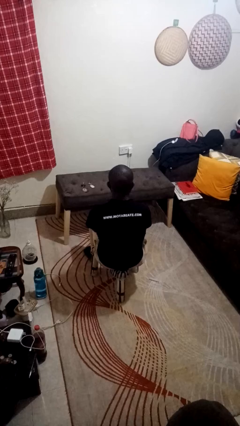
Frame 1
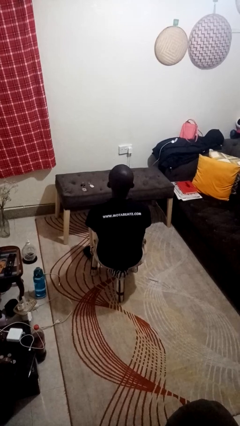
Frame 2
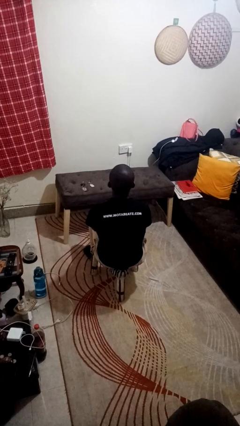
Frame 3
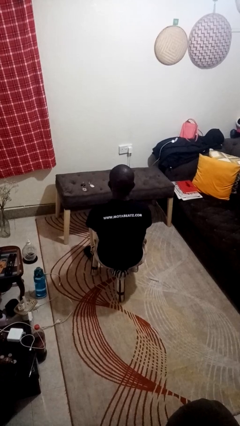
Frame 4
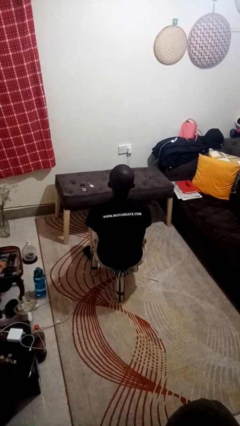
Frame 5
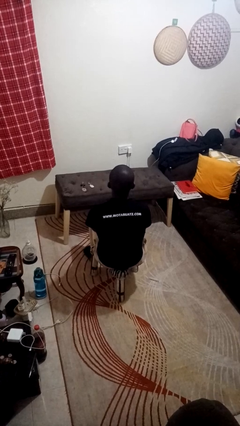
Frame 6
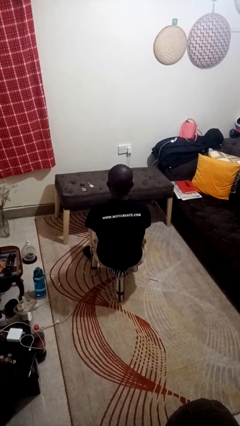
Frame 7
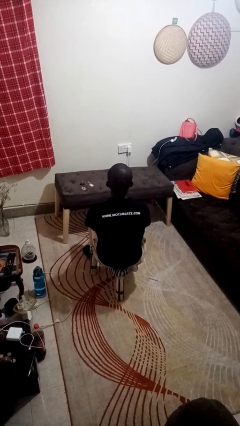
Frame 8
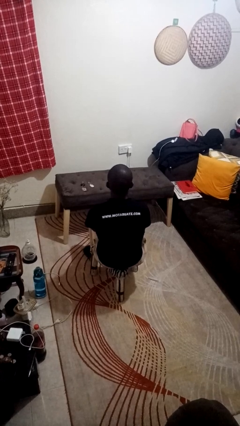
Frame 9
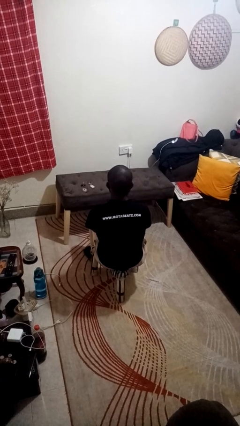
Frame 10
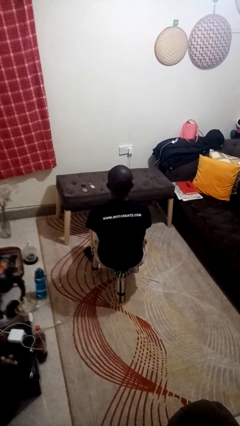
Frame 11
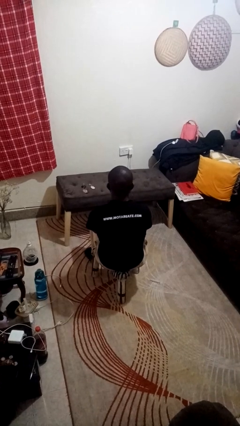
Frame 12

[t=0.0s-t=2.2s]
person nods head

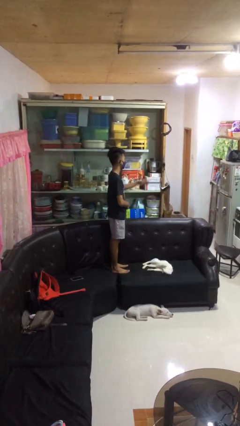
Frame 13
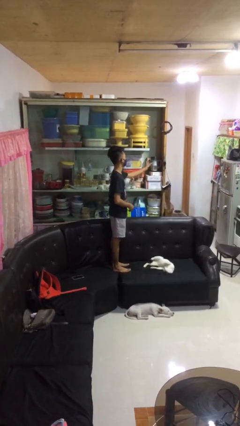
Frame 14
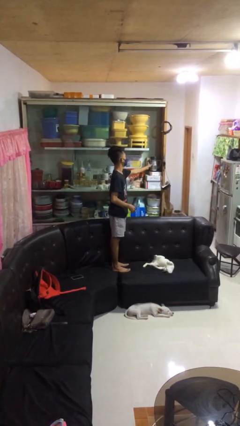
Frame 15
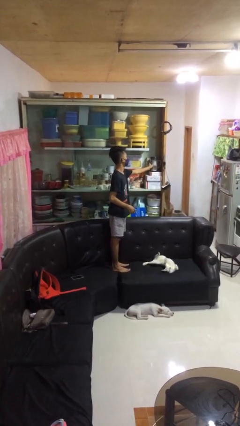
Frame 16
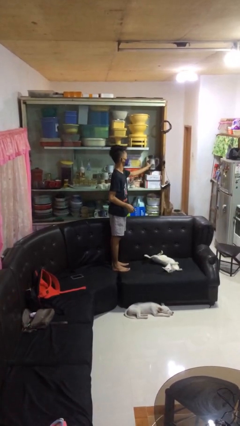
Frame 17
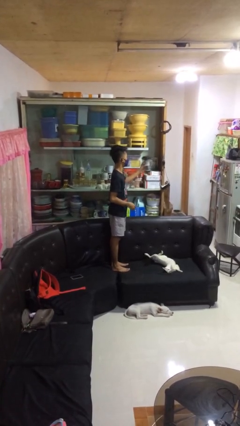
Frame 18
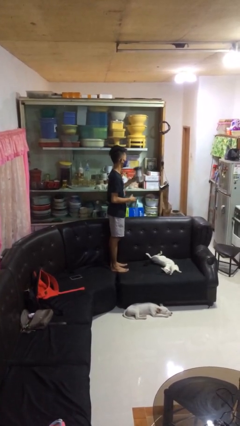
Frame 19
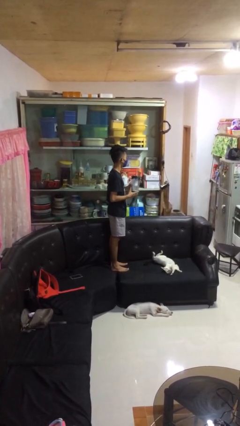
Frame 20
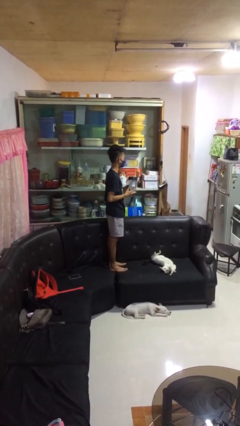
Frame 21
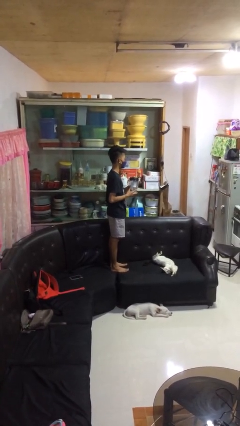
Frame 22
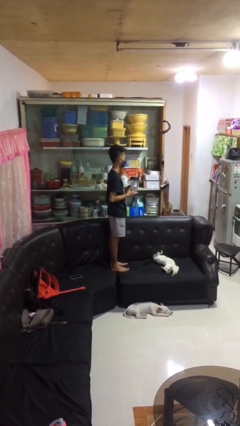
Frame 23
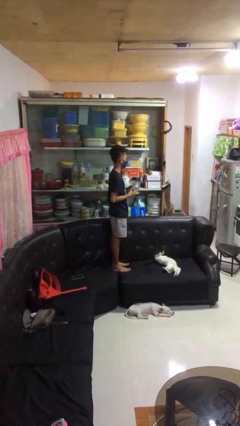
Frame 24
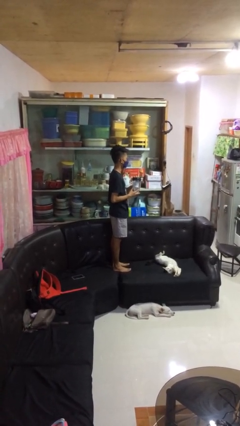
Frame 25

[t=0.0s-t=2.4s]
person picks up object from cabinet

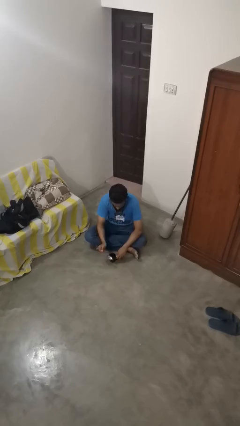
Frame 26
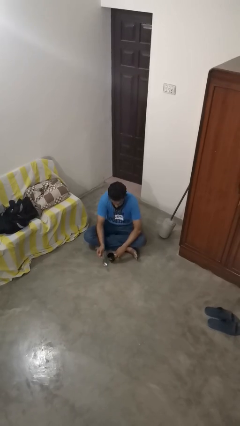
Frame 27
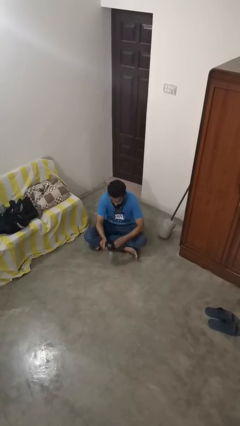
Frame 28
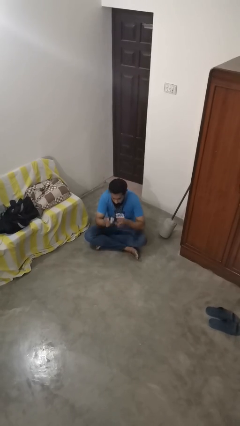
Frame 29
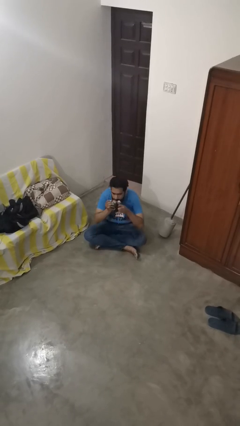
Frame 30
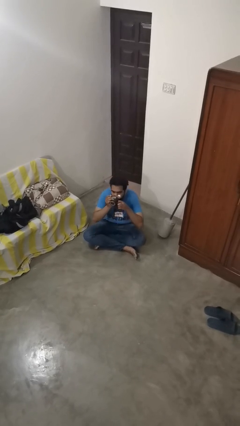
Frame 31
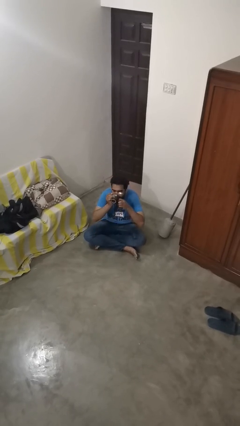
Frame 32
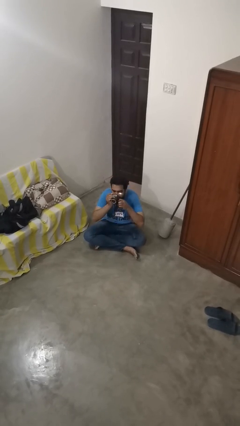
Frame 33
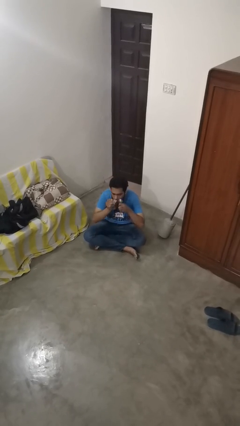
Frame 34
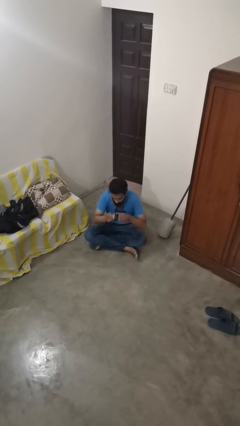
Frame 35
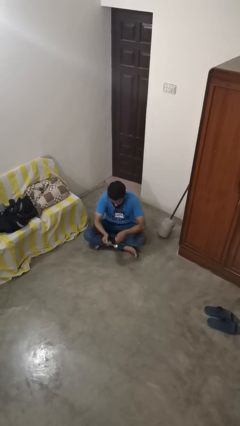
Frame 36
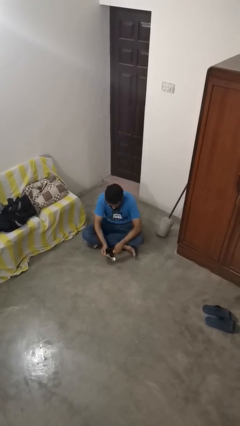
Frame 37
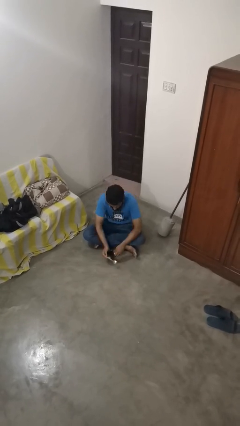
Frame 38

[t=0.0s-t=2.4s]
person drinks from mug

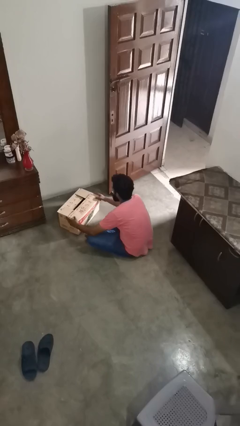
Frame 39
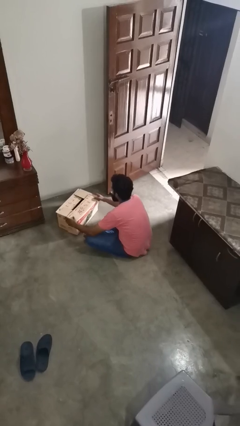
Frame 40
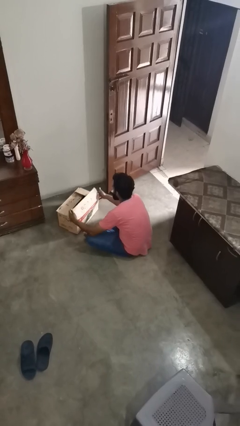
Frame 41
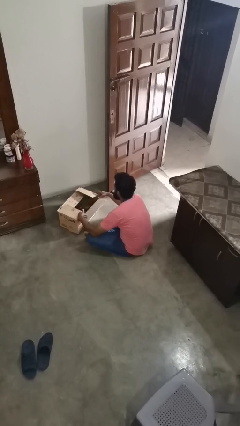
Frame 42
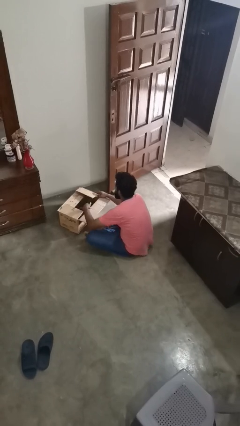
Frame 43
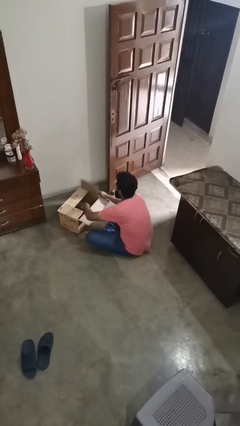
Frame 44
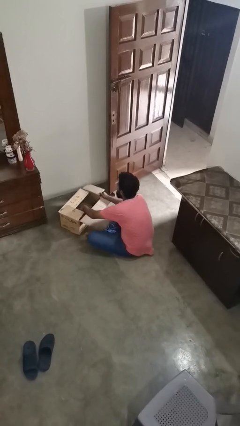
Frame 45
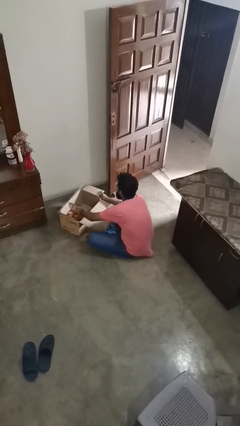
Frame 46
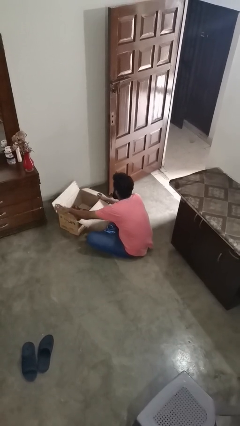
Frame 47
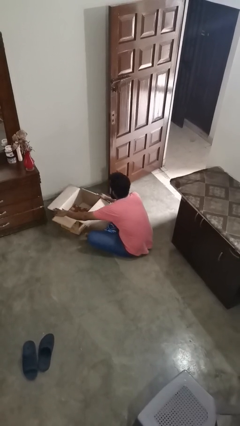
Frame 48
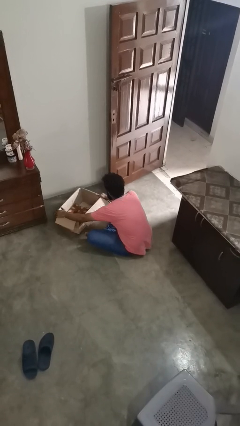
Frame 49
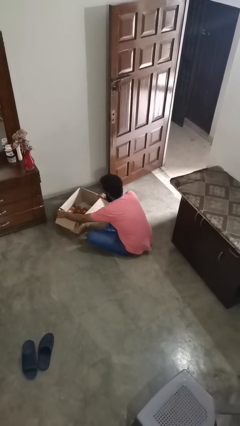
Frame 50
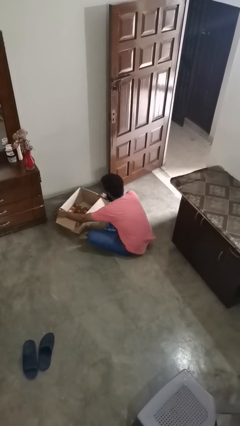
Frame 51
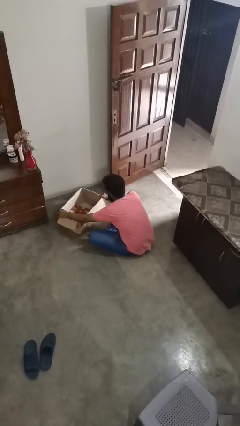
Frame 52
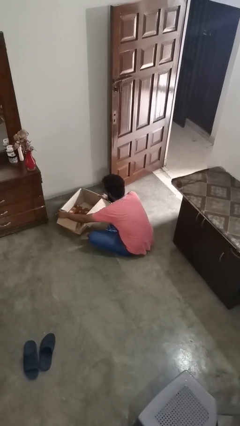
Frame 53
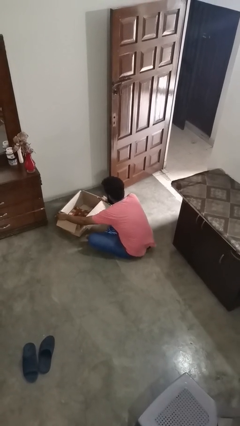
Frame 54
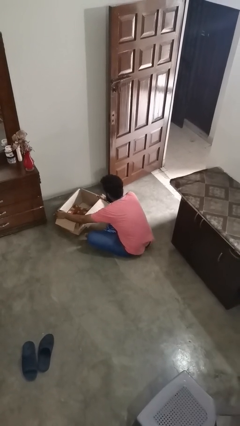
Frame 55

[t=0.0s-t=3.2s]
person opens box

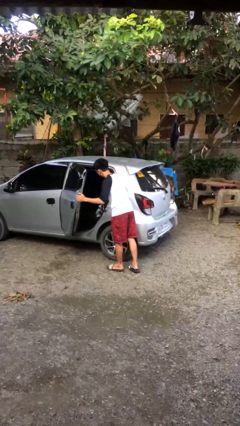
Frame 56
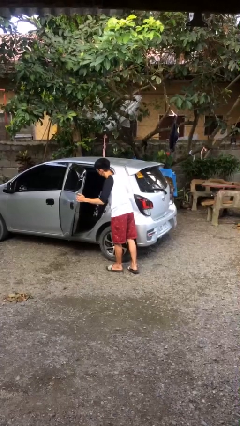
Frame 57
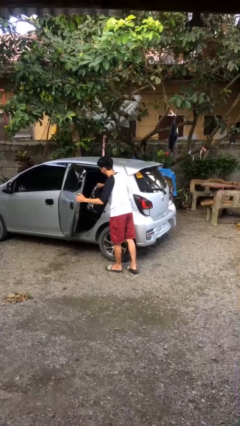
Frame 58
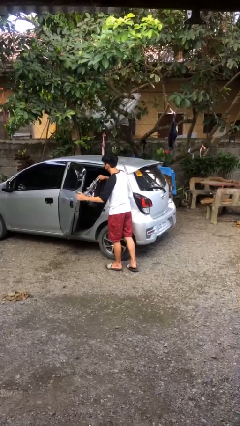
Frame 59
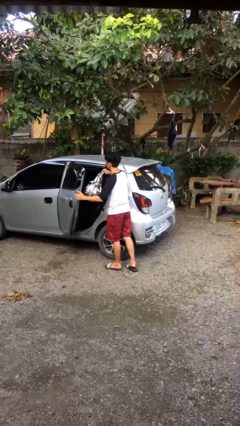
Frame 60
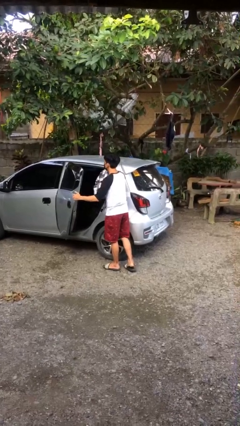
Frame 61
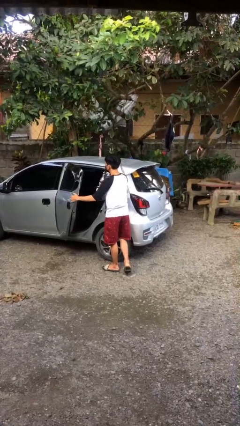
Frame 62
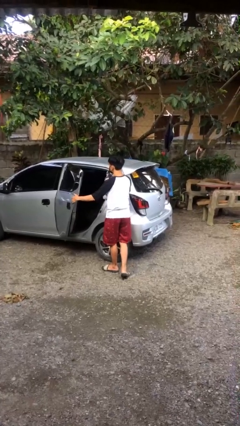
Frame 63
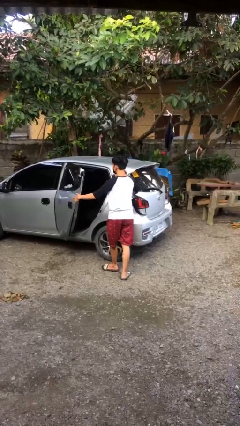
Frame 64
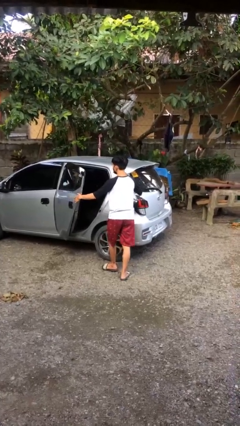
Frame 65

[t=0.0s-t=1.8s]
person unloads car

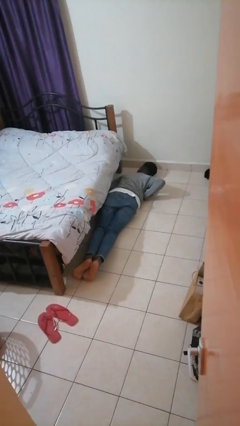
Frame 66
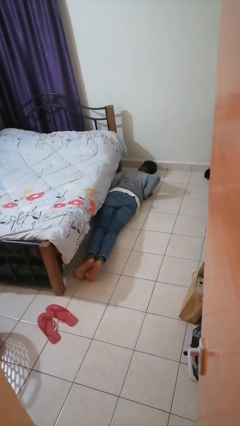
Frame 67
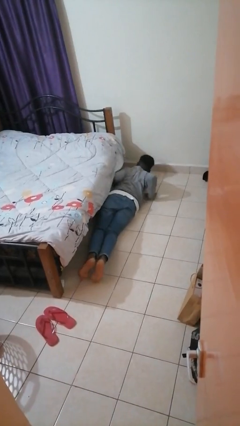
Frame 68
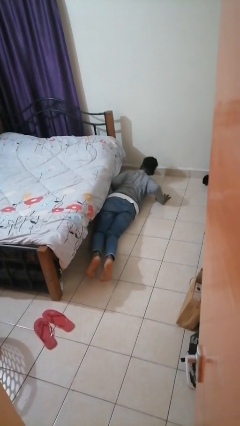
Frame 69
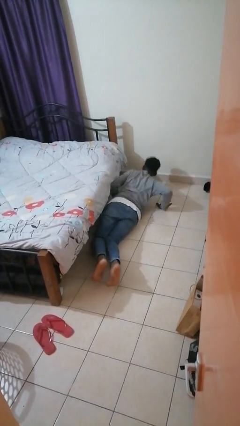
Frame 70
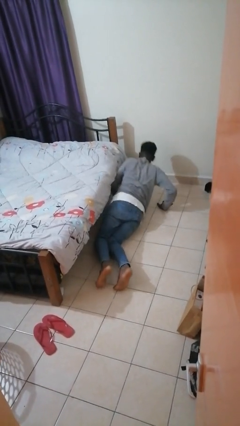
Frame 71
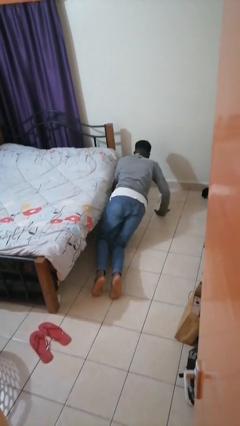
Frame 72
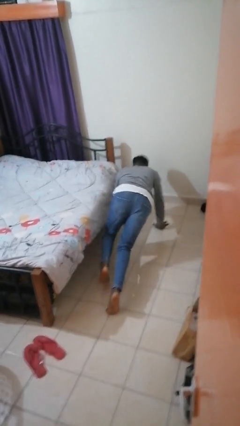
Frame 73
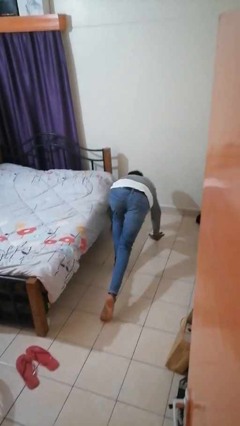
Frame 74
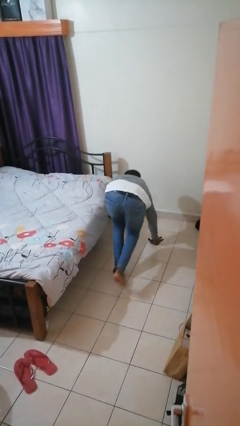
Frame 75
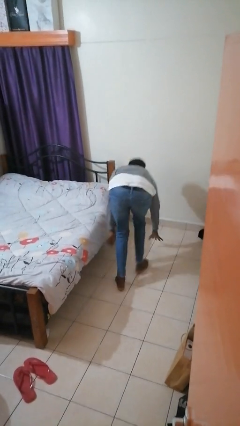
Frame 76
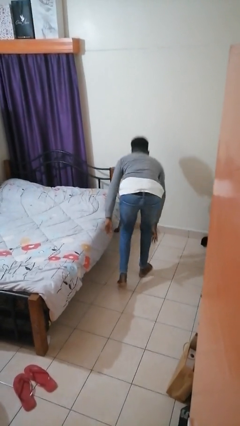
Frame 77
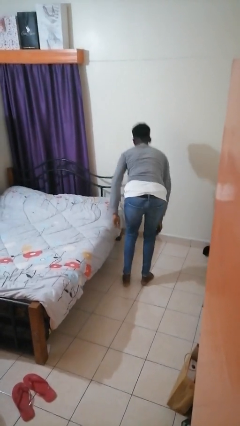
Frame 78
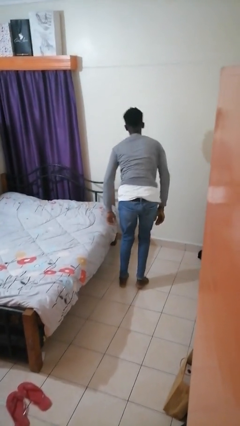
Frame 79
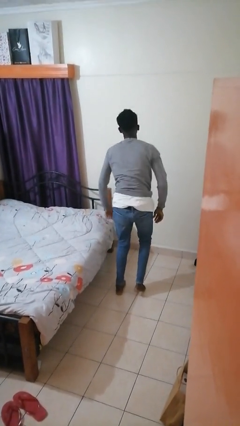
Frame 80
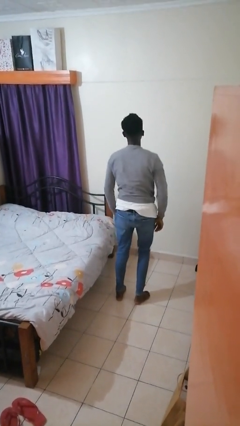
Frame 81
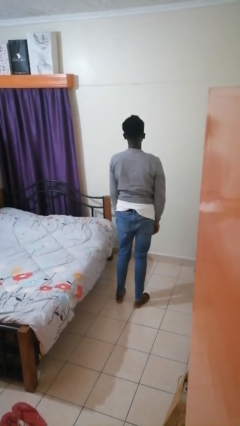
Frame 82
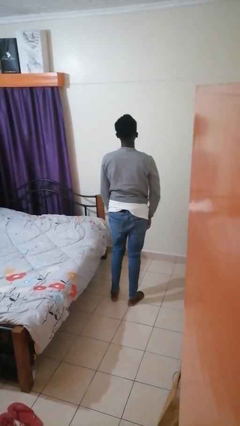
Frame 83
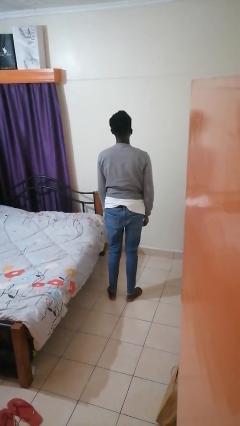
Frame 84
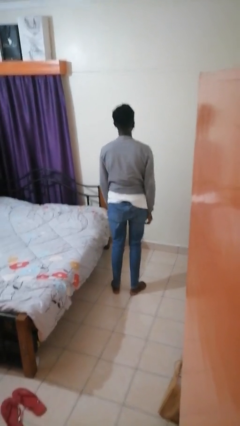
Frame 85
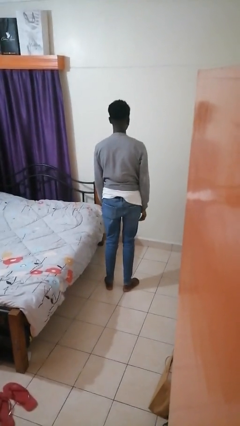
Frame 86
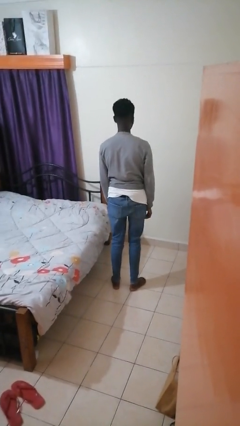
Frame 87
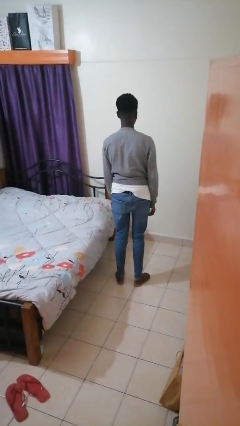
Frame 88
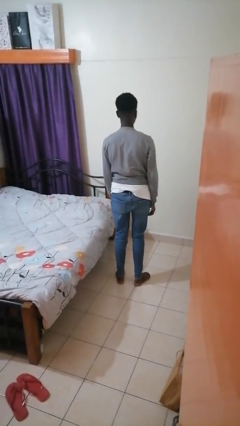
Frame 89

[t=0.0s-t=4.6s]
person stands up from floor

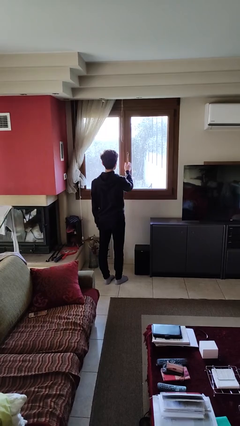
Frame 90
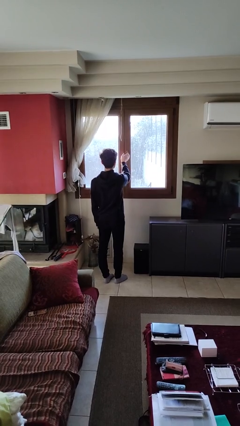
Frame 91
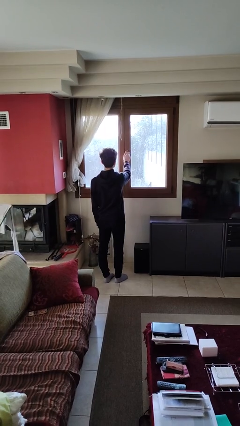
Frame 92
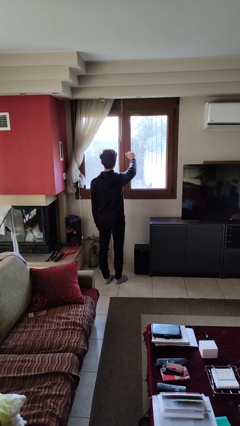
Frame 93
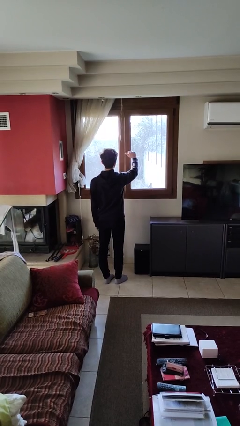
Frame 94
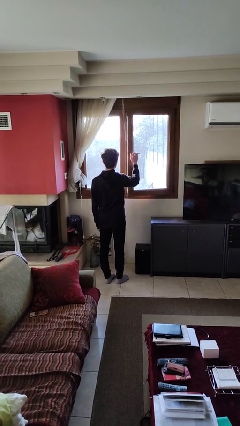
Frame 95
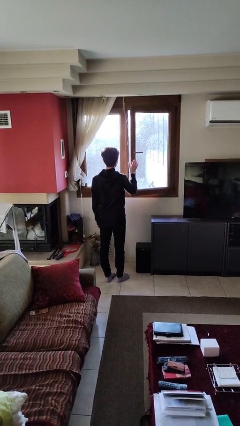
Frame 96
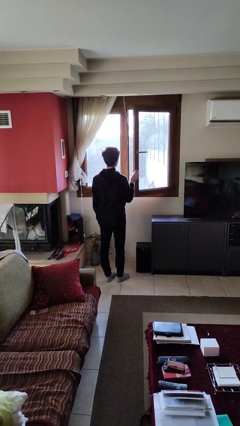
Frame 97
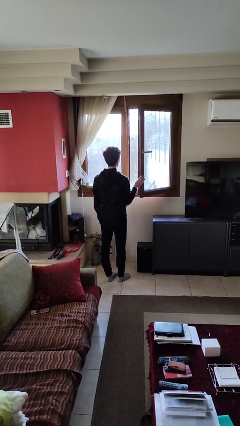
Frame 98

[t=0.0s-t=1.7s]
person opens home window
